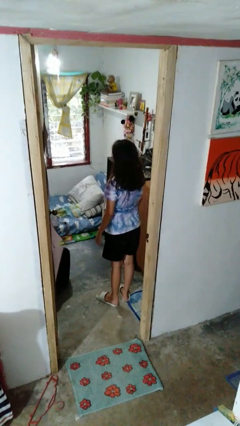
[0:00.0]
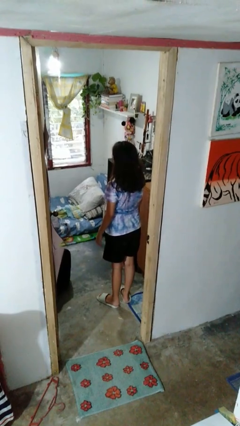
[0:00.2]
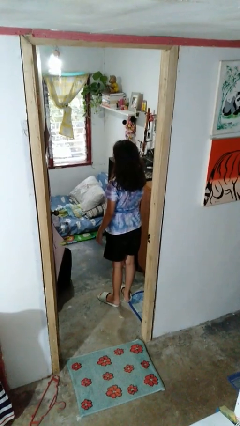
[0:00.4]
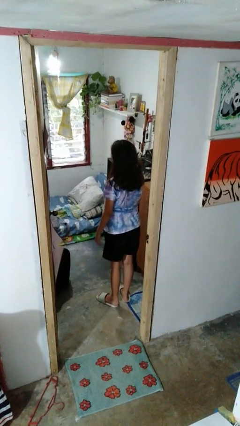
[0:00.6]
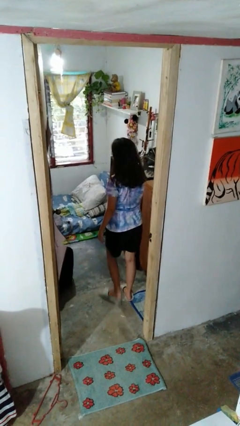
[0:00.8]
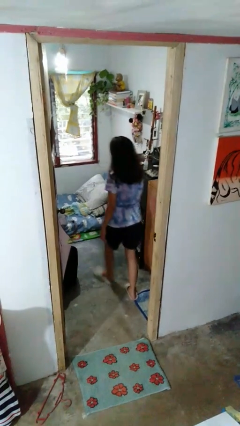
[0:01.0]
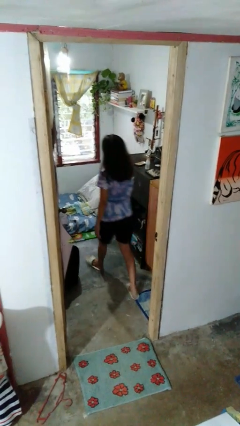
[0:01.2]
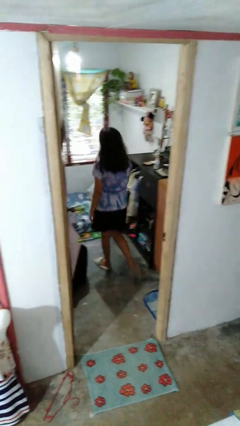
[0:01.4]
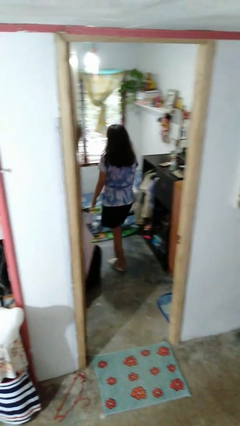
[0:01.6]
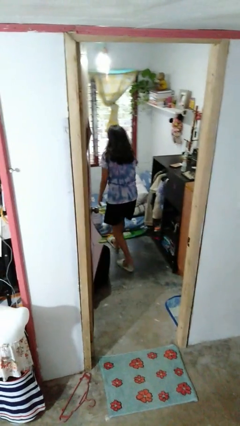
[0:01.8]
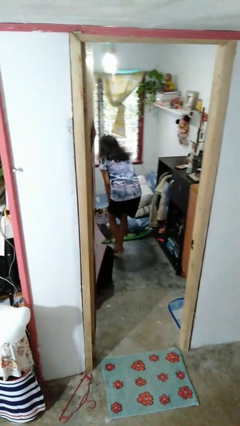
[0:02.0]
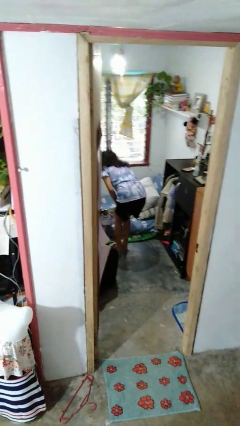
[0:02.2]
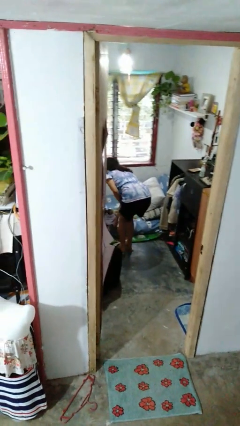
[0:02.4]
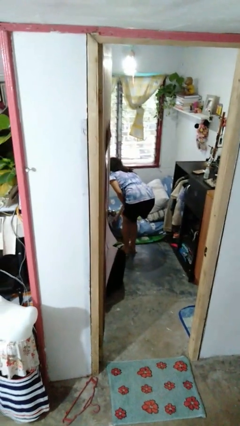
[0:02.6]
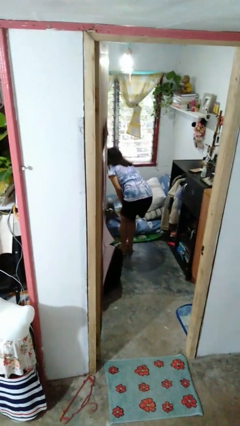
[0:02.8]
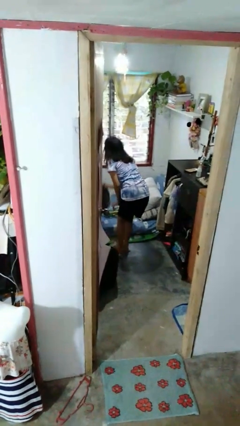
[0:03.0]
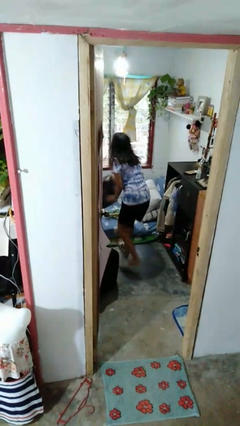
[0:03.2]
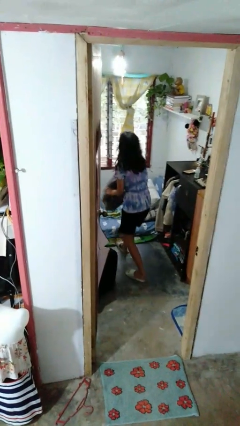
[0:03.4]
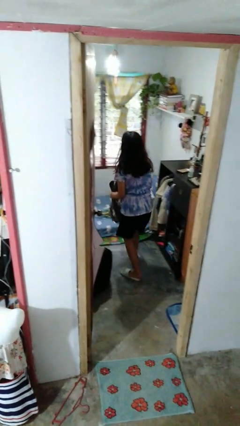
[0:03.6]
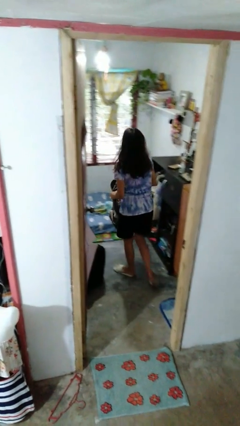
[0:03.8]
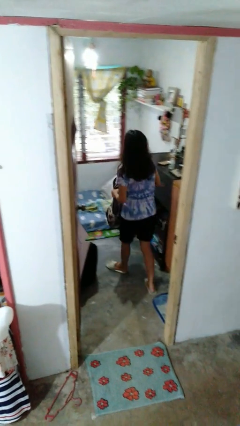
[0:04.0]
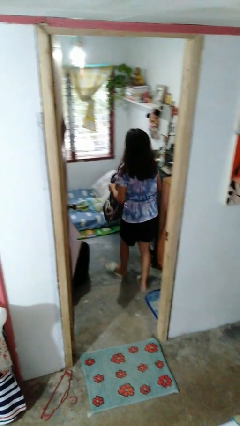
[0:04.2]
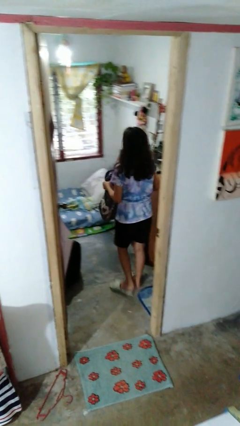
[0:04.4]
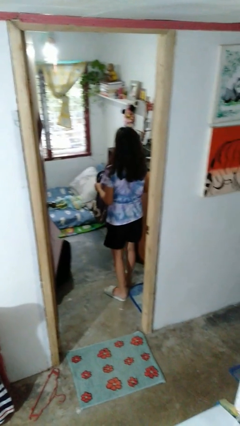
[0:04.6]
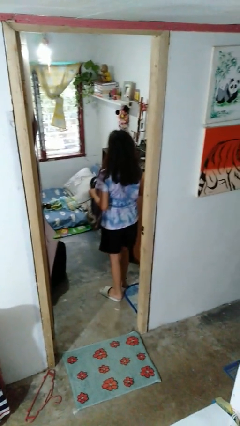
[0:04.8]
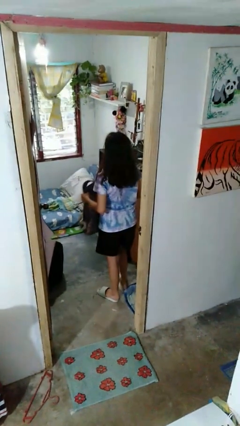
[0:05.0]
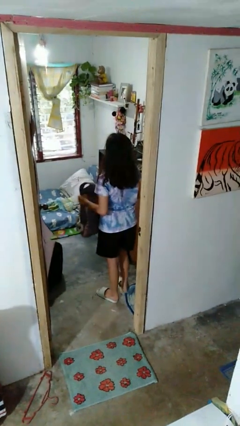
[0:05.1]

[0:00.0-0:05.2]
person picks up object from bed

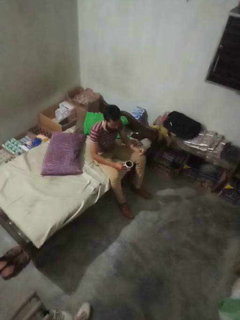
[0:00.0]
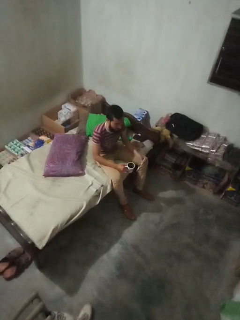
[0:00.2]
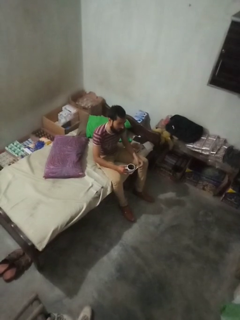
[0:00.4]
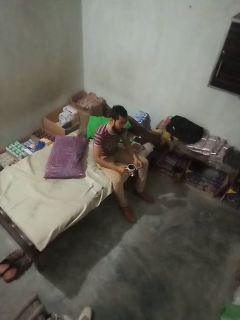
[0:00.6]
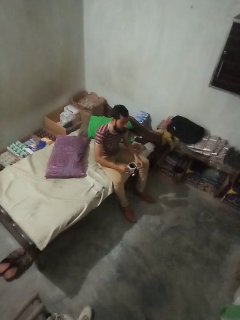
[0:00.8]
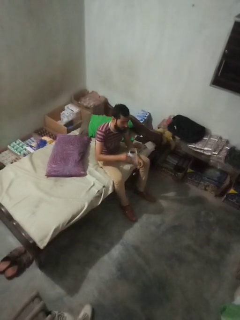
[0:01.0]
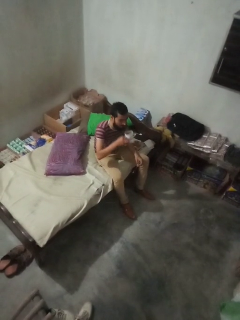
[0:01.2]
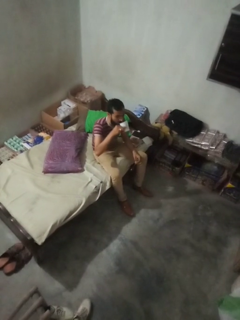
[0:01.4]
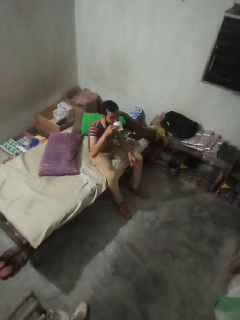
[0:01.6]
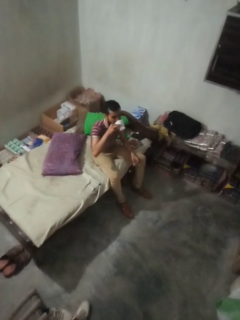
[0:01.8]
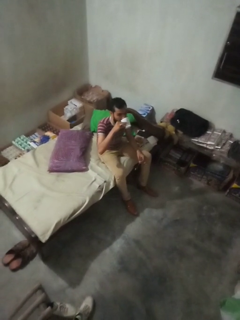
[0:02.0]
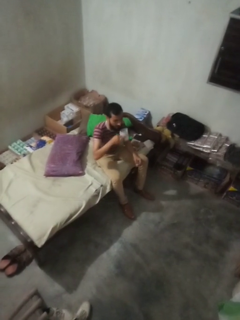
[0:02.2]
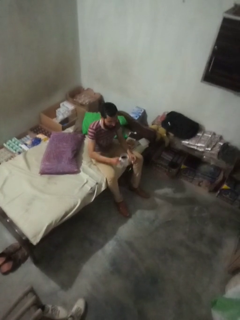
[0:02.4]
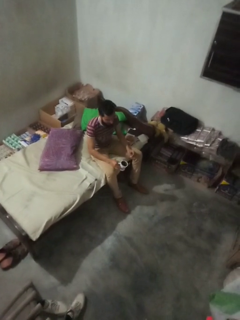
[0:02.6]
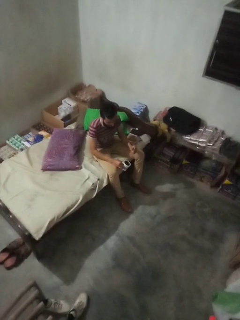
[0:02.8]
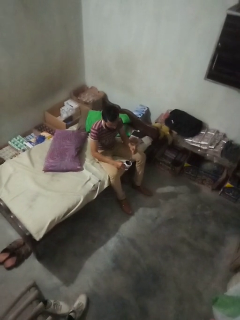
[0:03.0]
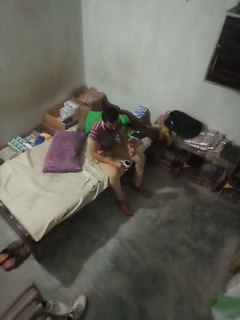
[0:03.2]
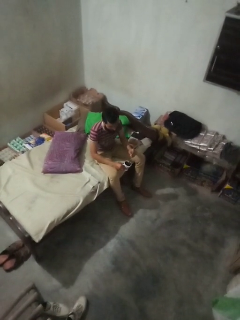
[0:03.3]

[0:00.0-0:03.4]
person drinks from mug

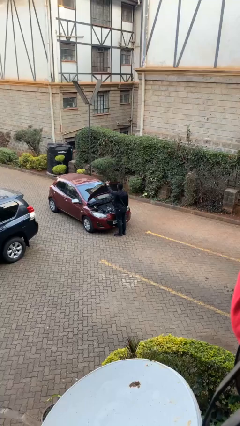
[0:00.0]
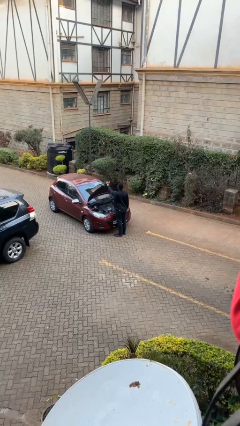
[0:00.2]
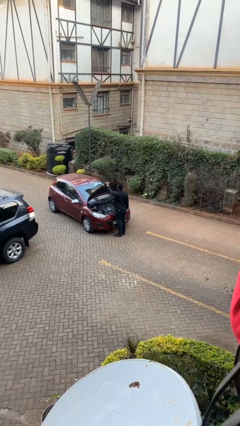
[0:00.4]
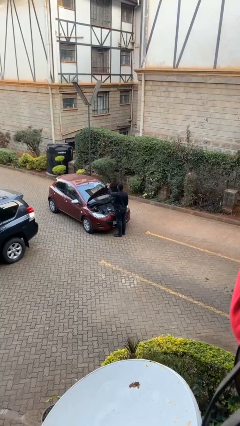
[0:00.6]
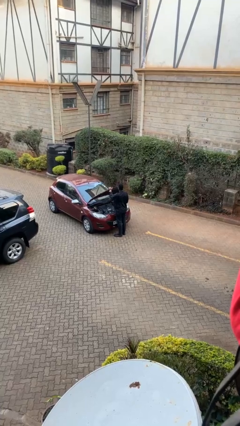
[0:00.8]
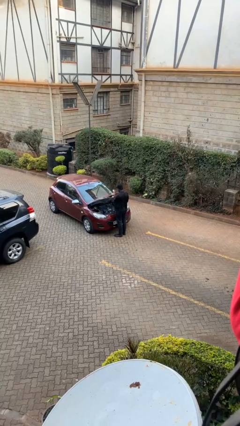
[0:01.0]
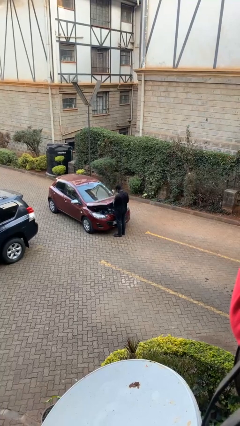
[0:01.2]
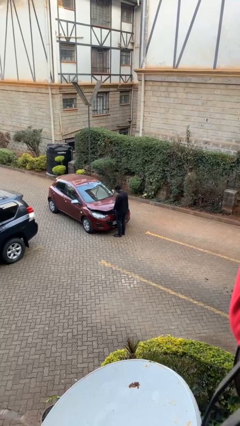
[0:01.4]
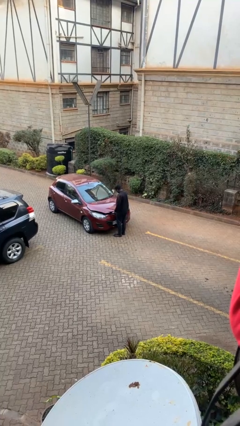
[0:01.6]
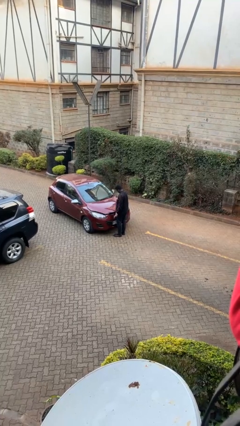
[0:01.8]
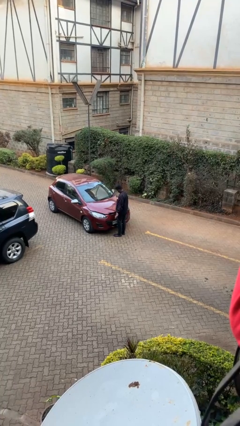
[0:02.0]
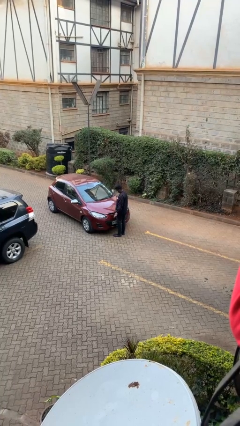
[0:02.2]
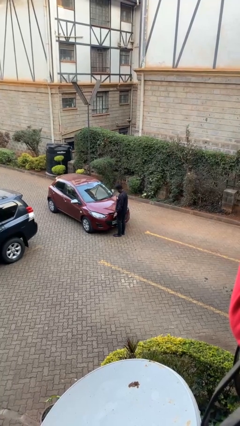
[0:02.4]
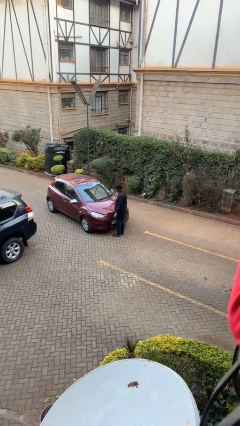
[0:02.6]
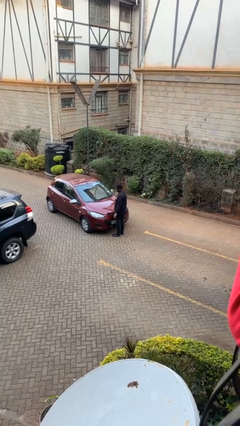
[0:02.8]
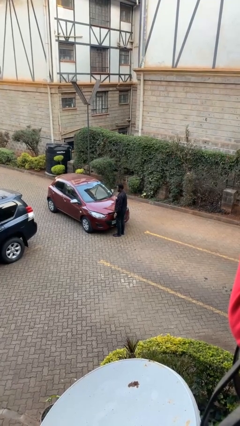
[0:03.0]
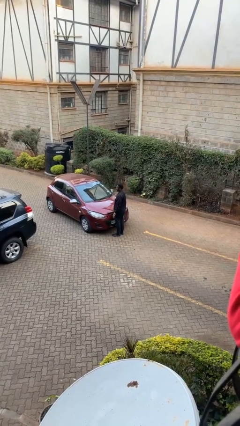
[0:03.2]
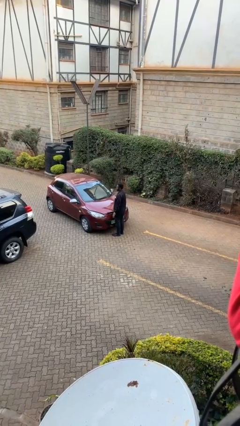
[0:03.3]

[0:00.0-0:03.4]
person closes car hood

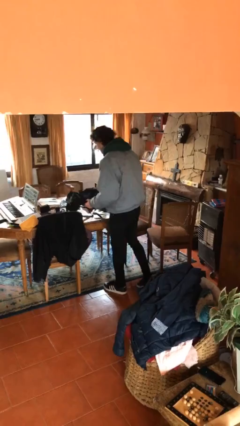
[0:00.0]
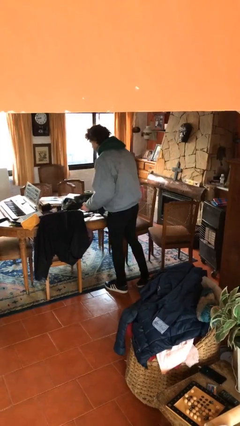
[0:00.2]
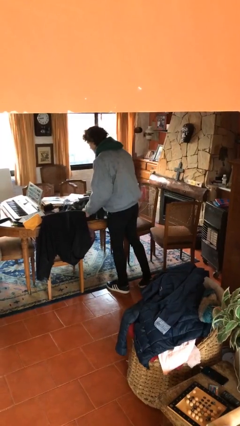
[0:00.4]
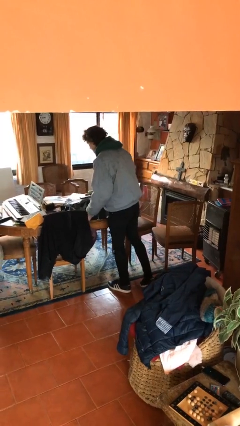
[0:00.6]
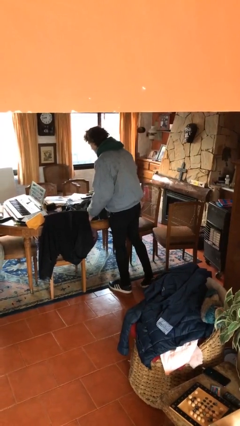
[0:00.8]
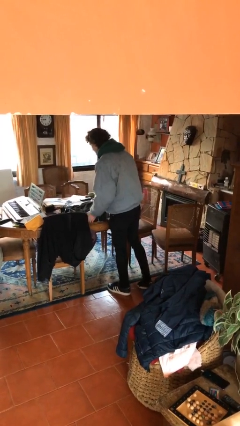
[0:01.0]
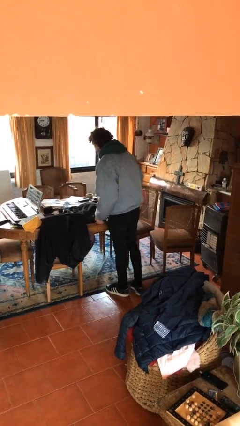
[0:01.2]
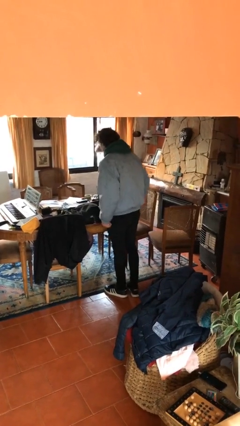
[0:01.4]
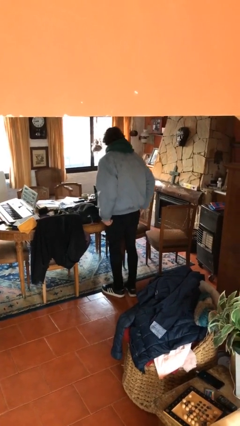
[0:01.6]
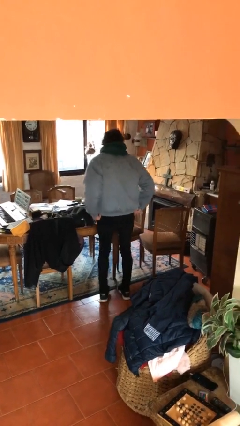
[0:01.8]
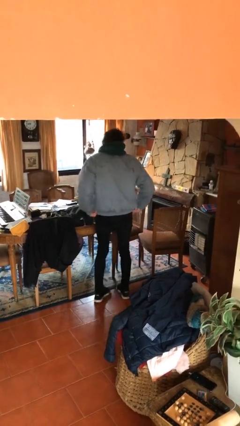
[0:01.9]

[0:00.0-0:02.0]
person puts down object on table

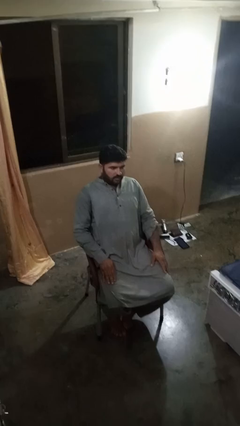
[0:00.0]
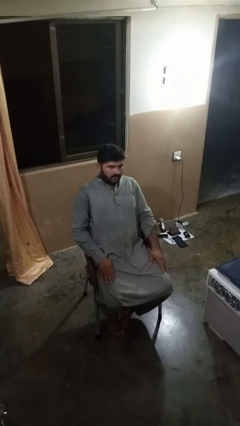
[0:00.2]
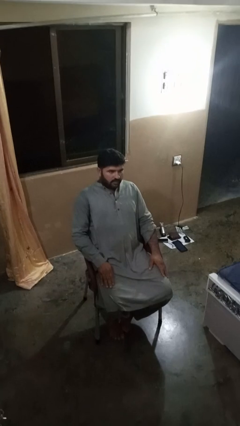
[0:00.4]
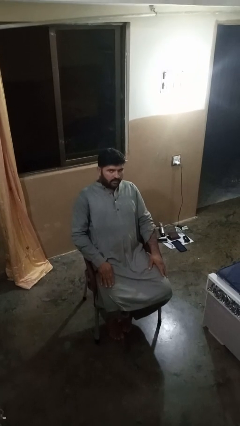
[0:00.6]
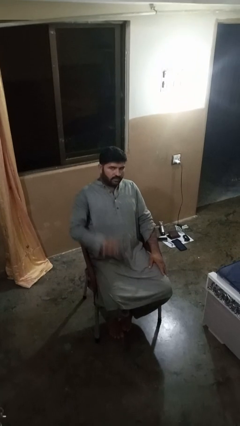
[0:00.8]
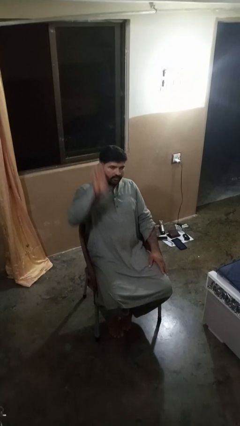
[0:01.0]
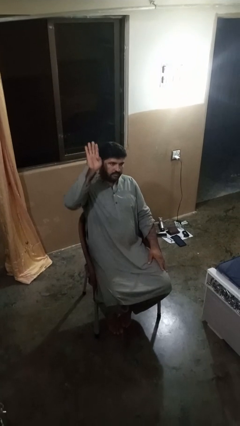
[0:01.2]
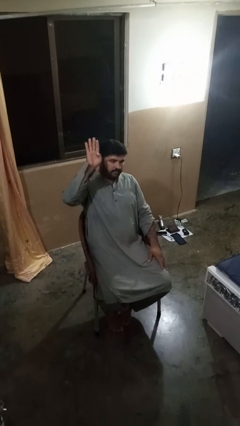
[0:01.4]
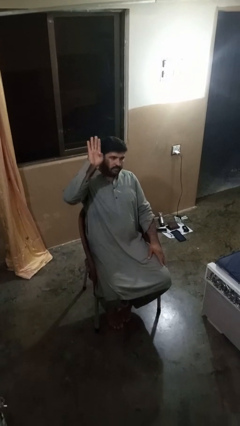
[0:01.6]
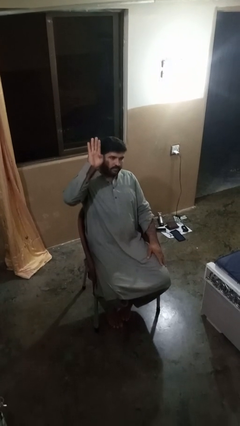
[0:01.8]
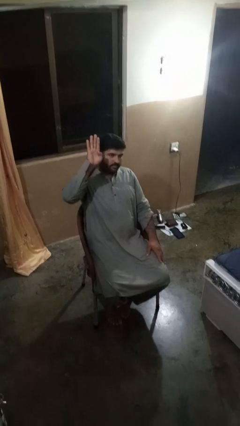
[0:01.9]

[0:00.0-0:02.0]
person gestures number four

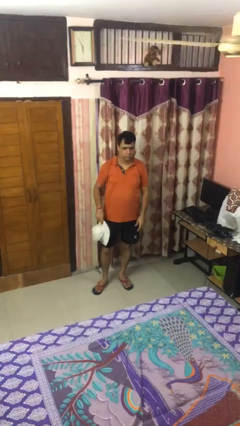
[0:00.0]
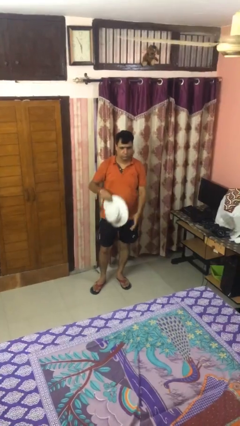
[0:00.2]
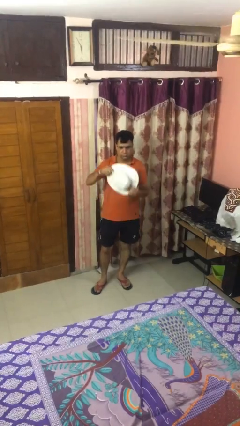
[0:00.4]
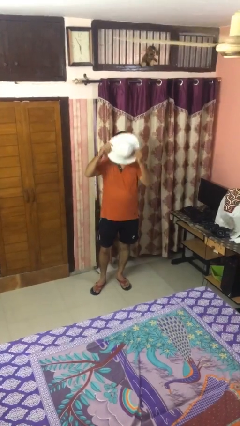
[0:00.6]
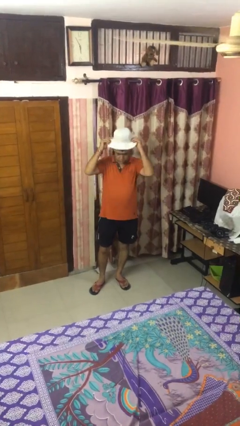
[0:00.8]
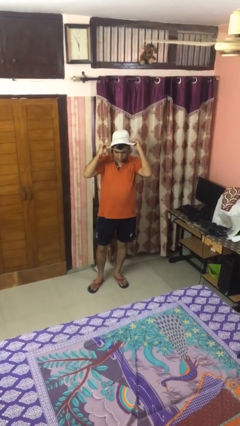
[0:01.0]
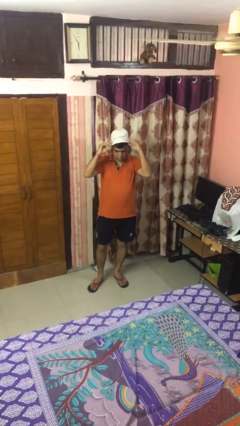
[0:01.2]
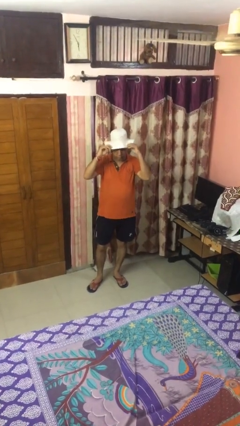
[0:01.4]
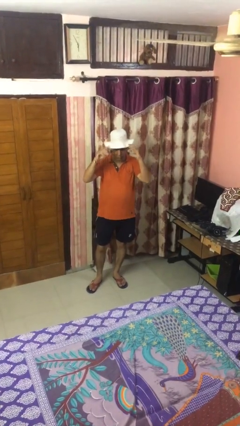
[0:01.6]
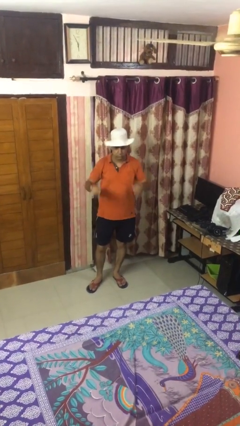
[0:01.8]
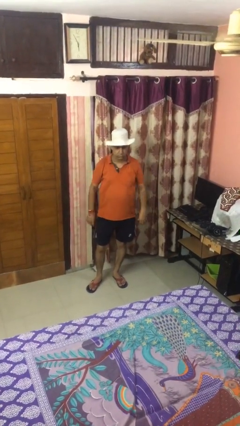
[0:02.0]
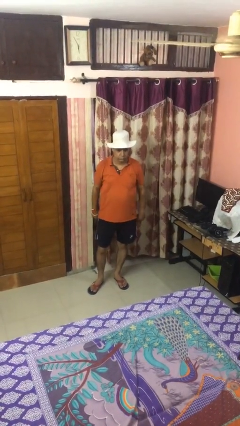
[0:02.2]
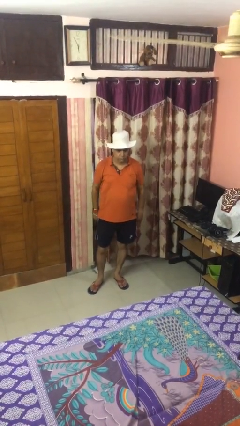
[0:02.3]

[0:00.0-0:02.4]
person puts on hat
